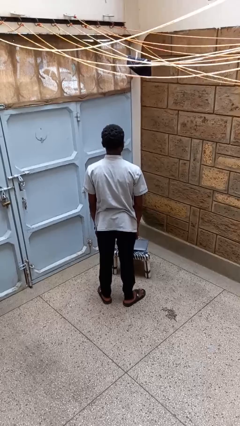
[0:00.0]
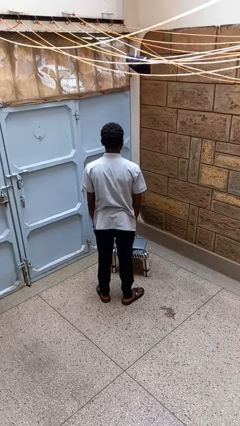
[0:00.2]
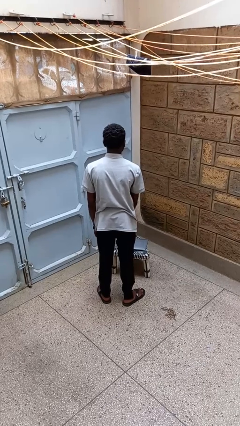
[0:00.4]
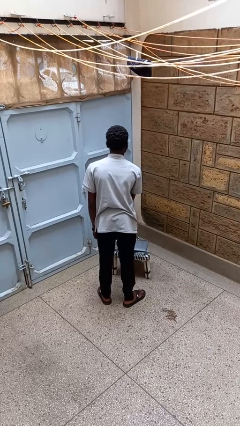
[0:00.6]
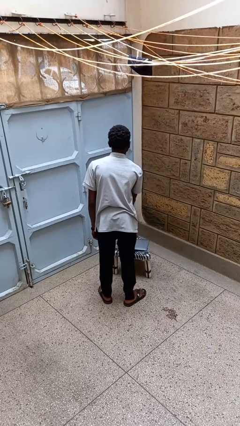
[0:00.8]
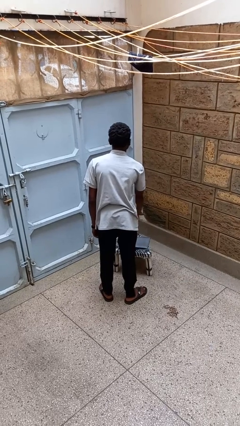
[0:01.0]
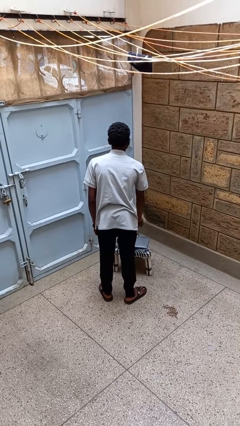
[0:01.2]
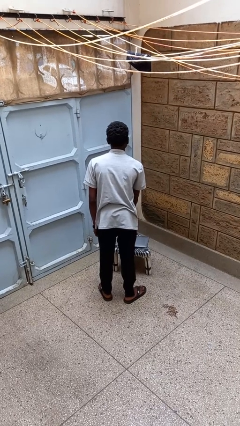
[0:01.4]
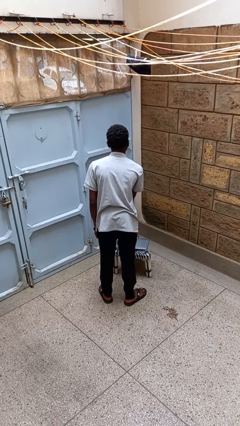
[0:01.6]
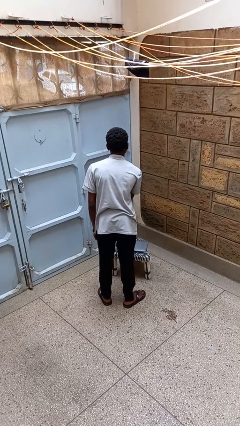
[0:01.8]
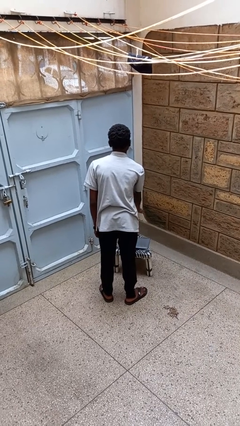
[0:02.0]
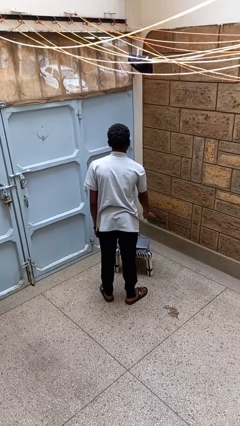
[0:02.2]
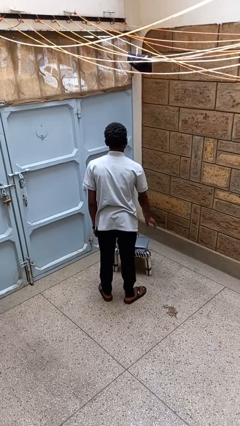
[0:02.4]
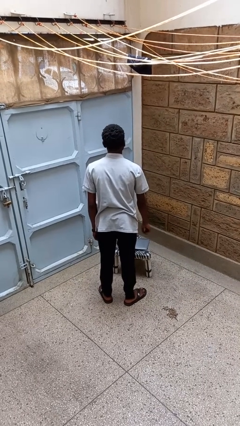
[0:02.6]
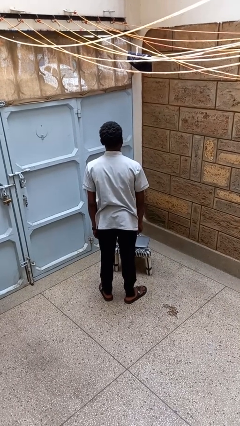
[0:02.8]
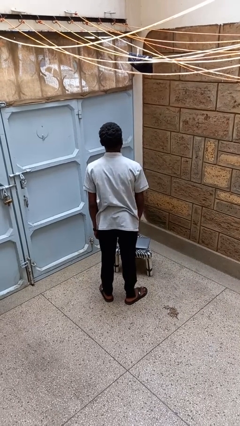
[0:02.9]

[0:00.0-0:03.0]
person waves hand over object

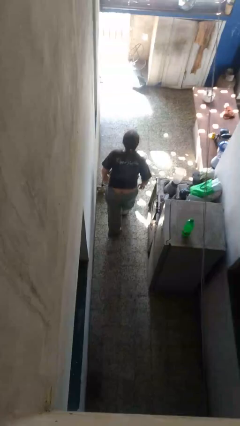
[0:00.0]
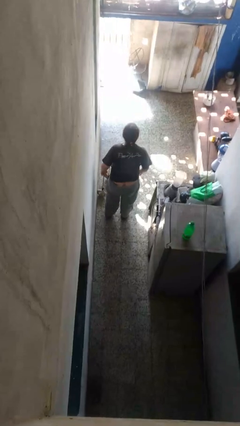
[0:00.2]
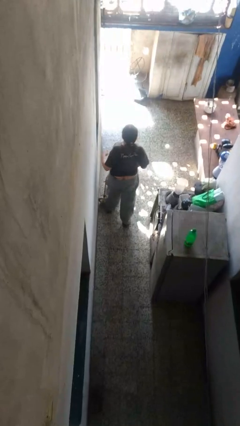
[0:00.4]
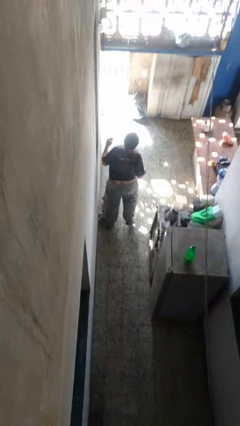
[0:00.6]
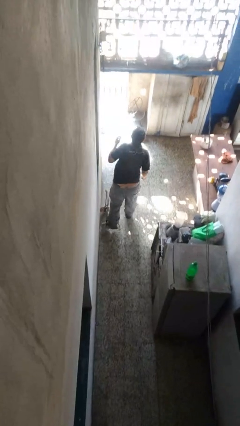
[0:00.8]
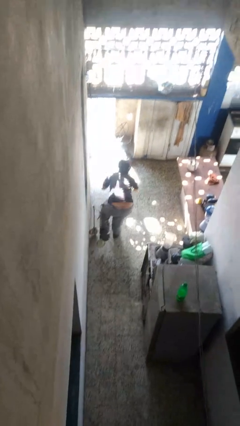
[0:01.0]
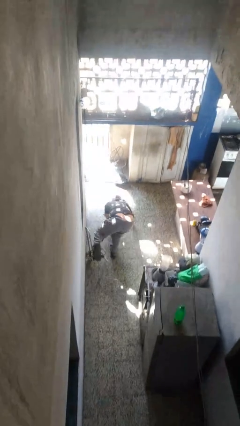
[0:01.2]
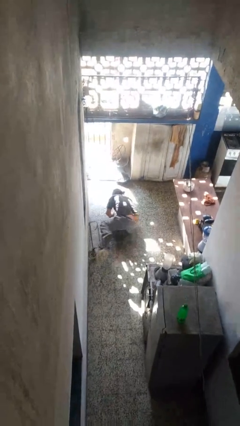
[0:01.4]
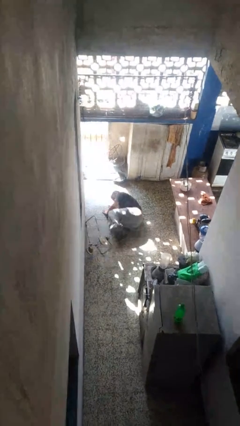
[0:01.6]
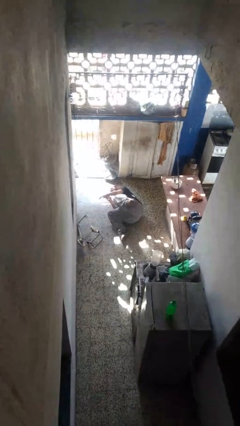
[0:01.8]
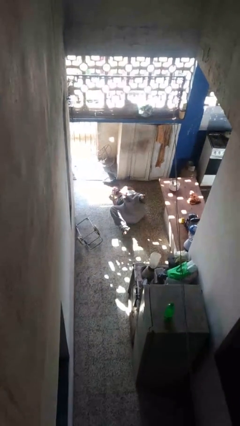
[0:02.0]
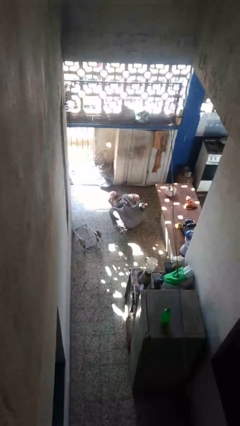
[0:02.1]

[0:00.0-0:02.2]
person trips on object on floor

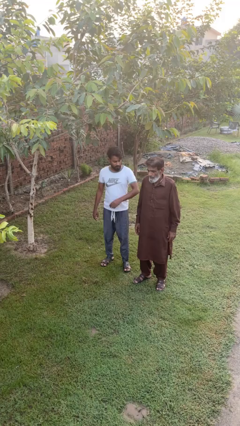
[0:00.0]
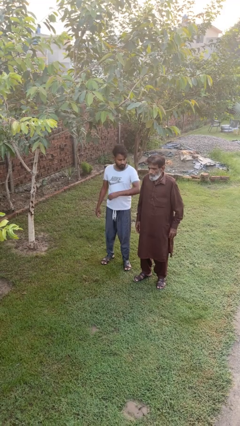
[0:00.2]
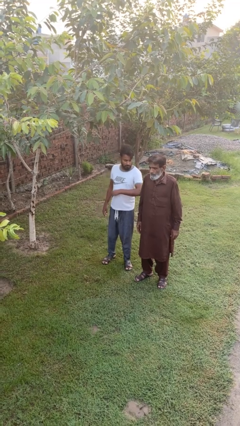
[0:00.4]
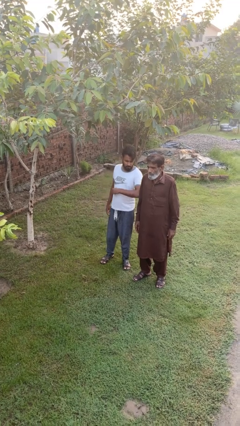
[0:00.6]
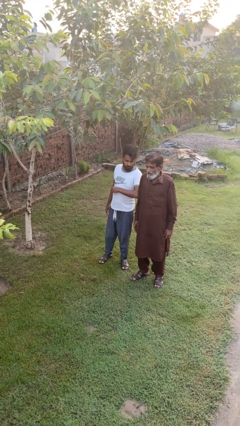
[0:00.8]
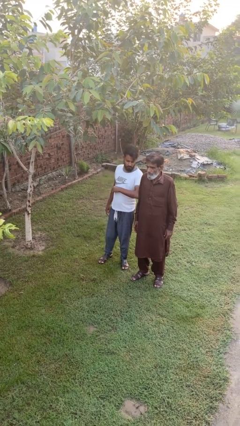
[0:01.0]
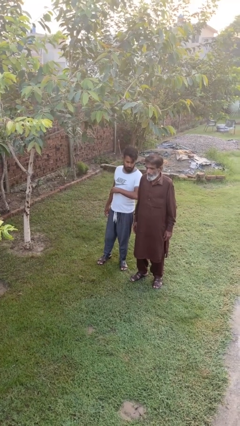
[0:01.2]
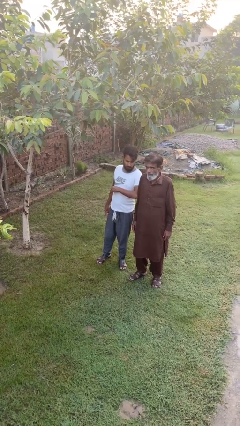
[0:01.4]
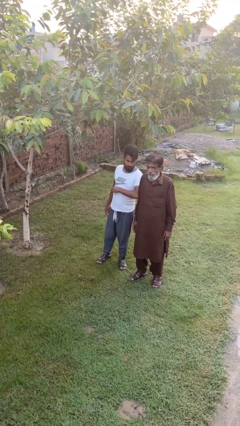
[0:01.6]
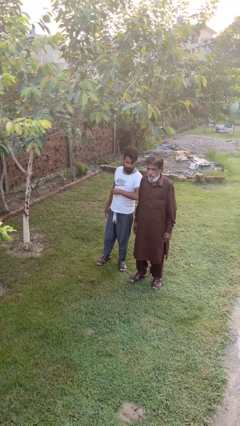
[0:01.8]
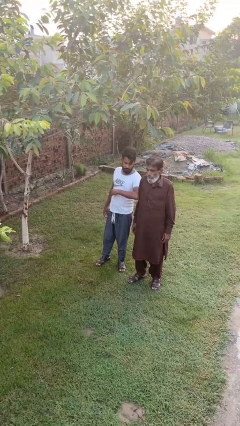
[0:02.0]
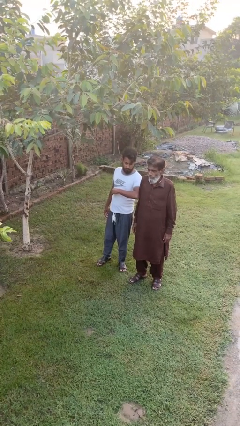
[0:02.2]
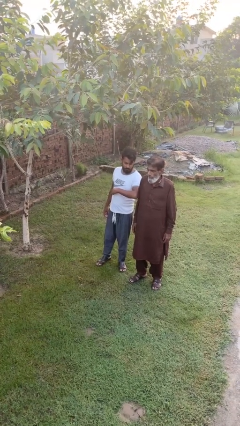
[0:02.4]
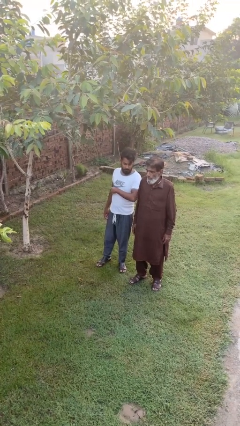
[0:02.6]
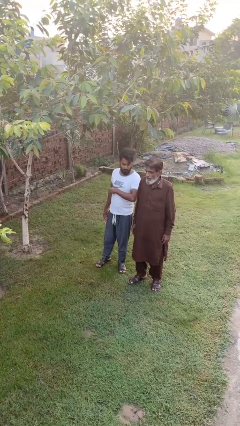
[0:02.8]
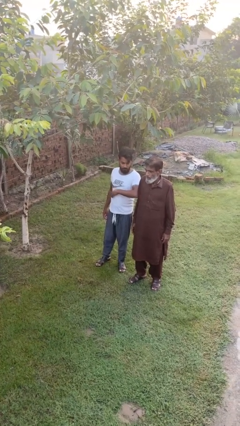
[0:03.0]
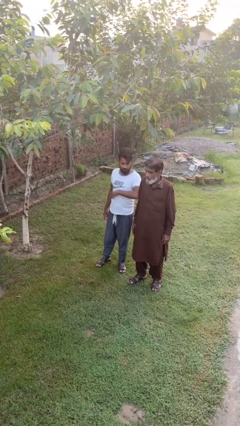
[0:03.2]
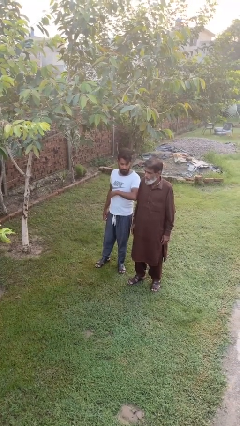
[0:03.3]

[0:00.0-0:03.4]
person nudges person with elbow

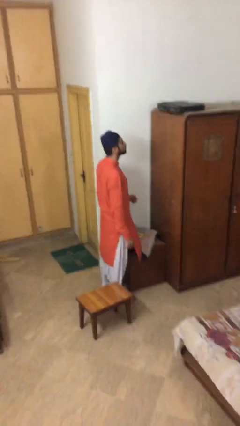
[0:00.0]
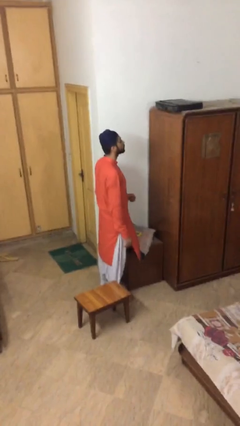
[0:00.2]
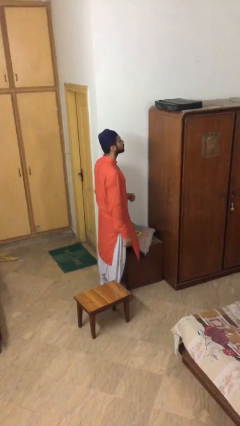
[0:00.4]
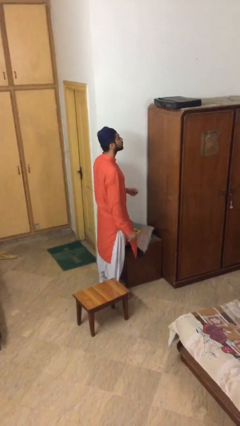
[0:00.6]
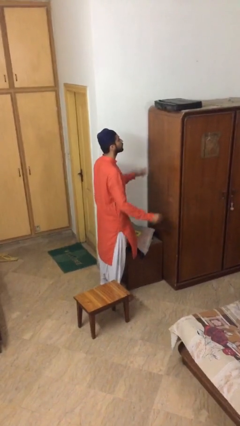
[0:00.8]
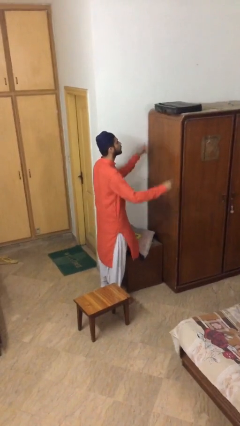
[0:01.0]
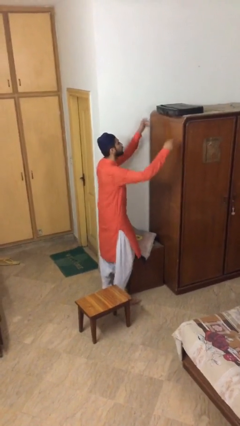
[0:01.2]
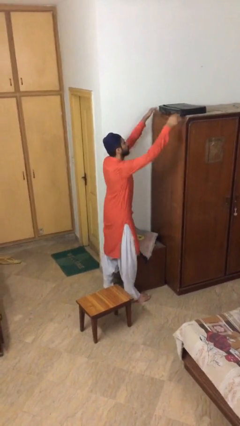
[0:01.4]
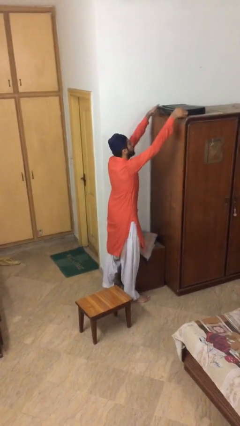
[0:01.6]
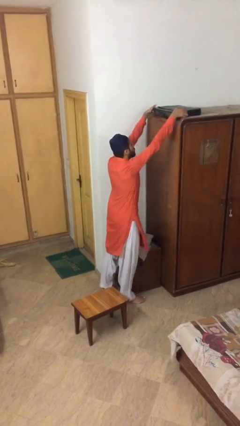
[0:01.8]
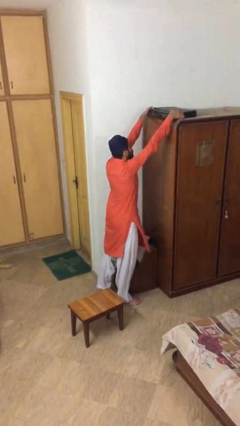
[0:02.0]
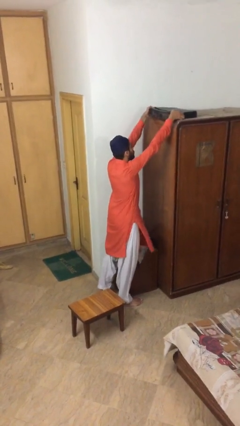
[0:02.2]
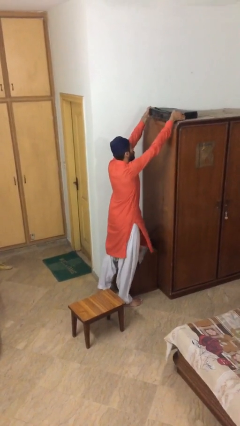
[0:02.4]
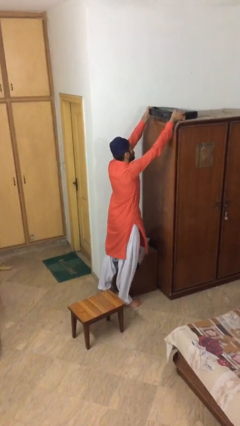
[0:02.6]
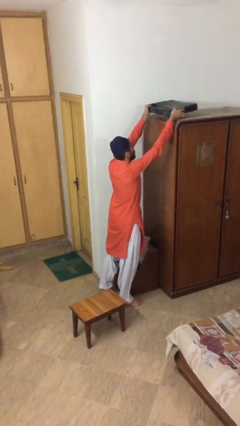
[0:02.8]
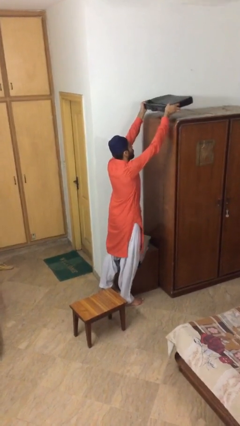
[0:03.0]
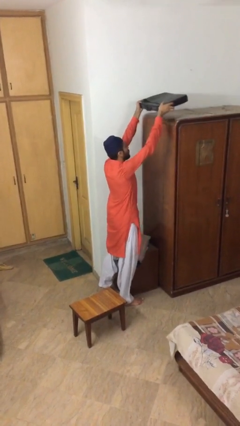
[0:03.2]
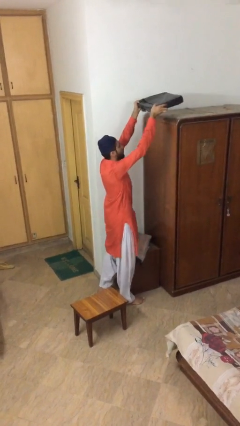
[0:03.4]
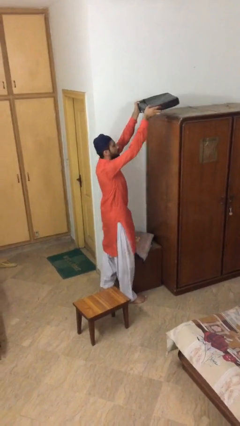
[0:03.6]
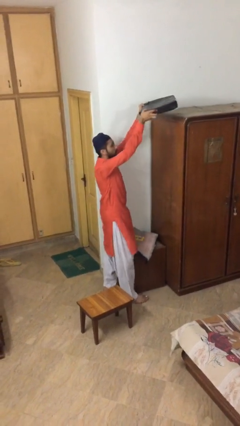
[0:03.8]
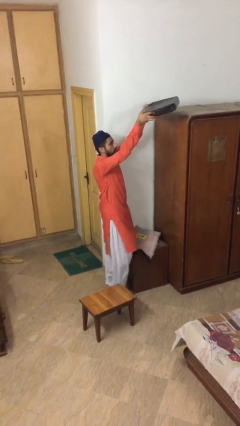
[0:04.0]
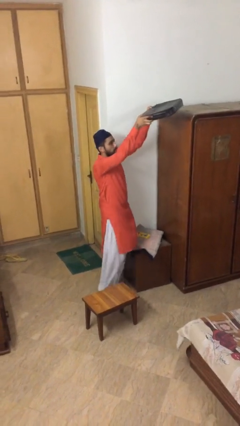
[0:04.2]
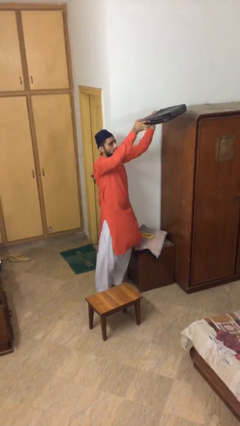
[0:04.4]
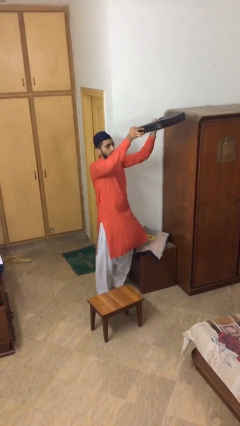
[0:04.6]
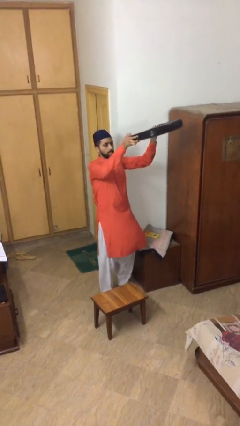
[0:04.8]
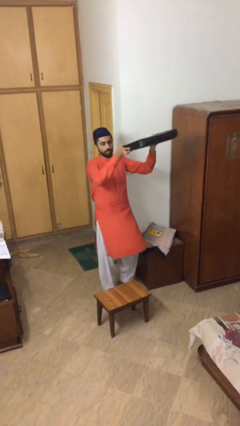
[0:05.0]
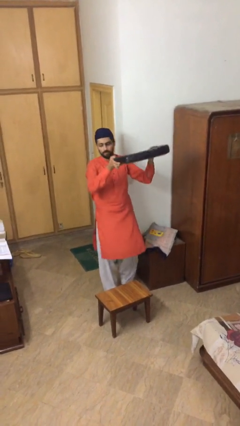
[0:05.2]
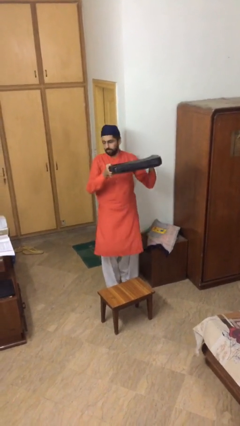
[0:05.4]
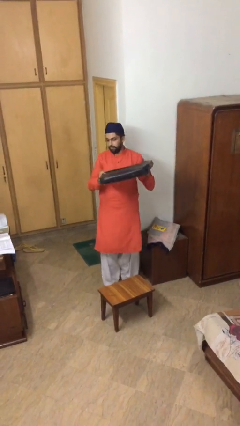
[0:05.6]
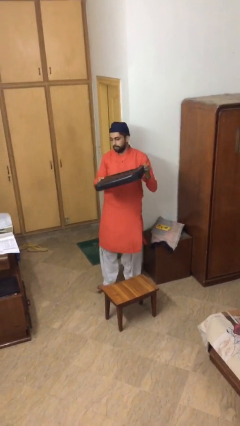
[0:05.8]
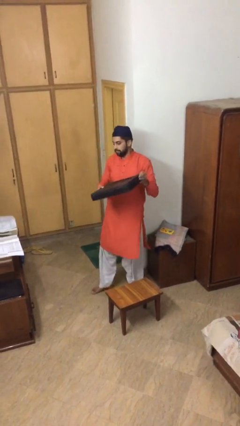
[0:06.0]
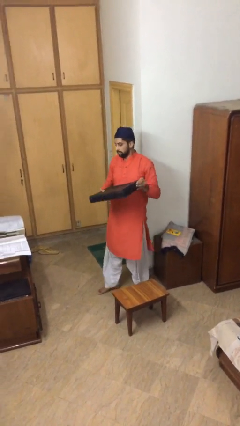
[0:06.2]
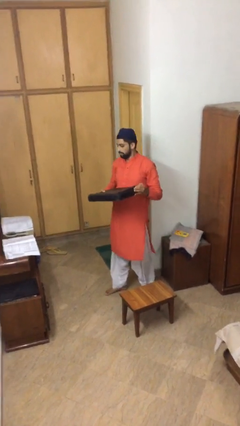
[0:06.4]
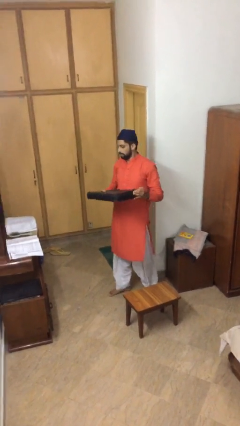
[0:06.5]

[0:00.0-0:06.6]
person picks up object from shelf

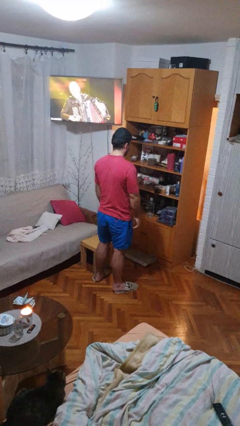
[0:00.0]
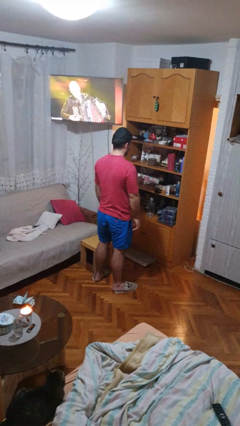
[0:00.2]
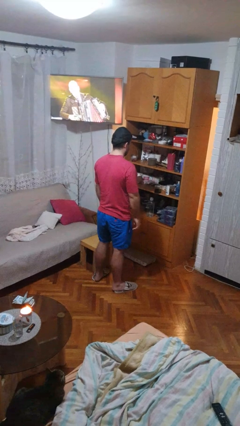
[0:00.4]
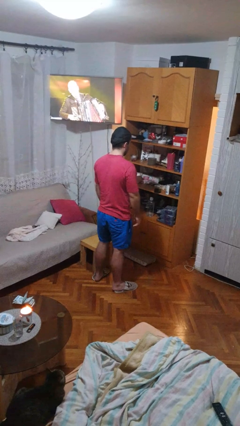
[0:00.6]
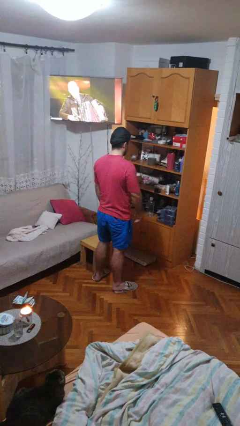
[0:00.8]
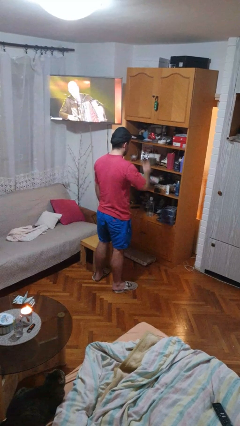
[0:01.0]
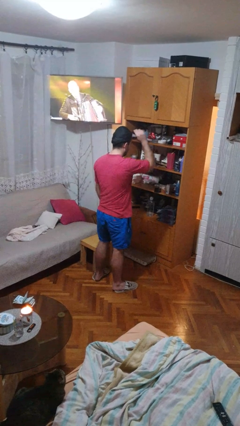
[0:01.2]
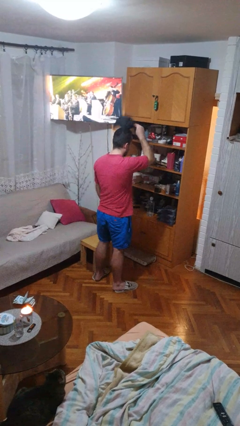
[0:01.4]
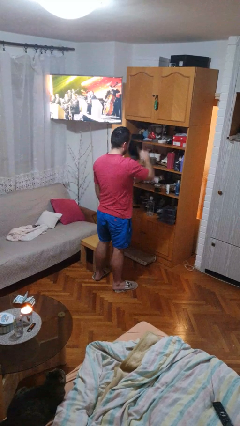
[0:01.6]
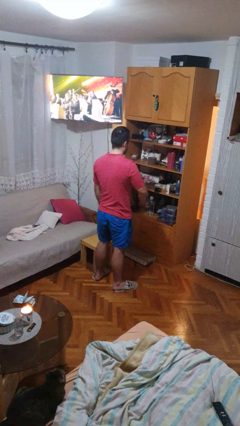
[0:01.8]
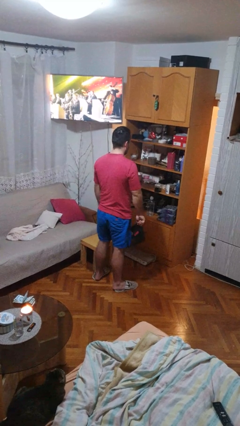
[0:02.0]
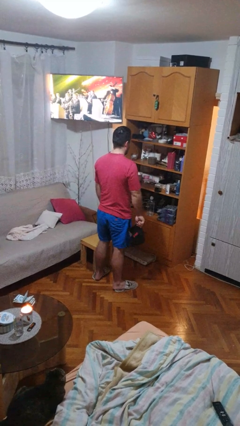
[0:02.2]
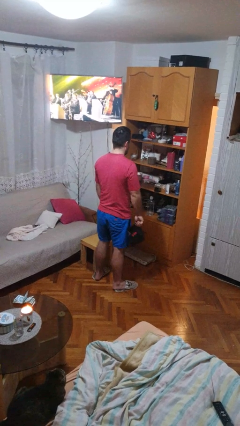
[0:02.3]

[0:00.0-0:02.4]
person takes off hat
